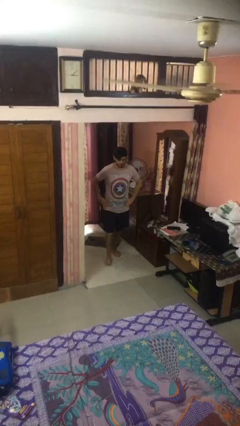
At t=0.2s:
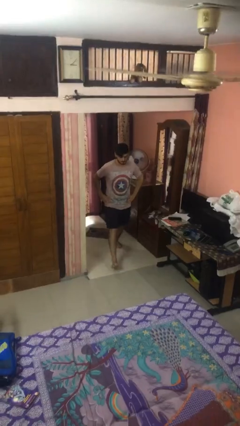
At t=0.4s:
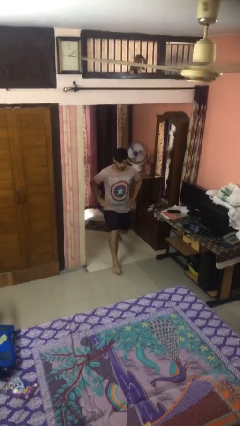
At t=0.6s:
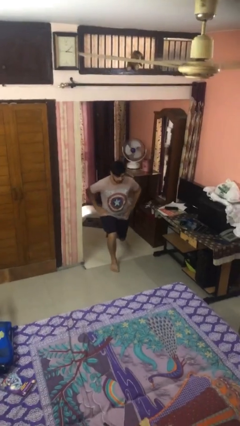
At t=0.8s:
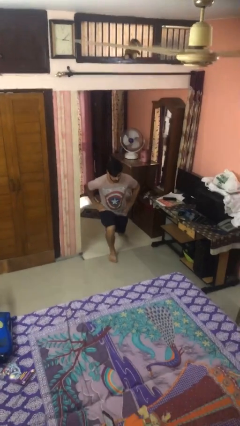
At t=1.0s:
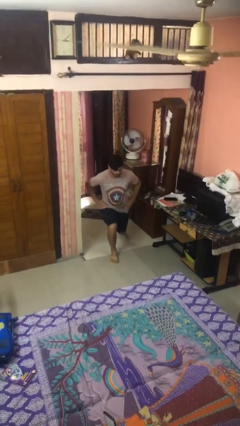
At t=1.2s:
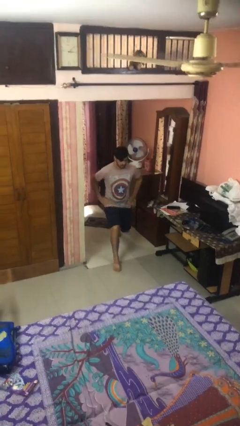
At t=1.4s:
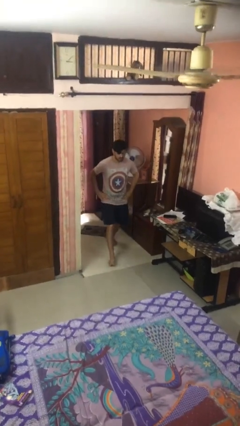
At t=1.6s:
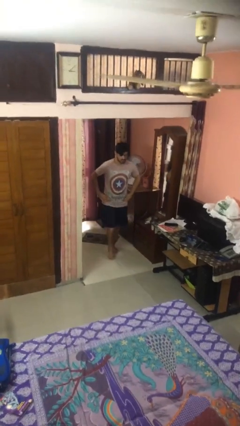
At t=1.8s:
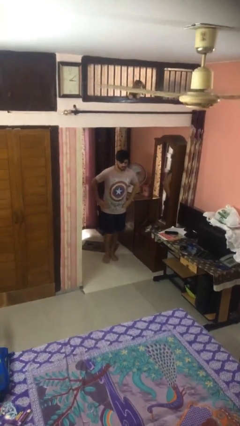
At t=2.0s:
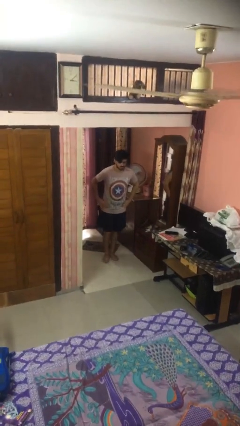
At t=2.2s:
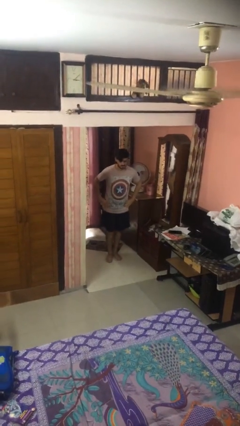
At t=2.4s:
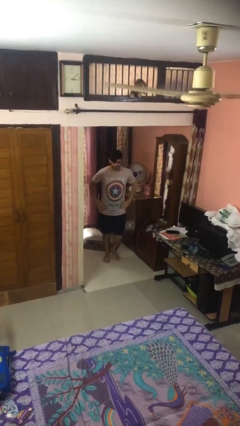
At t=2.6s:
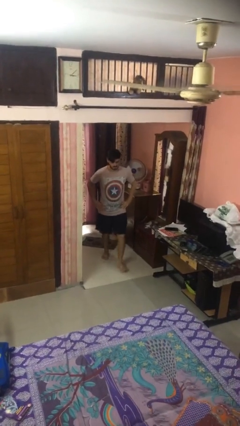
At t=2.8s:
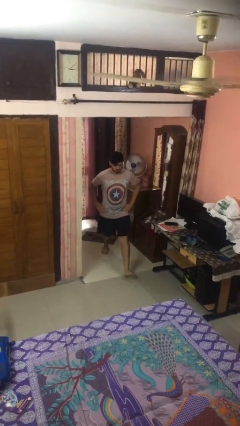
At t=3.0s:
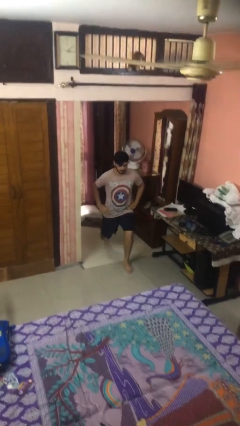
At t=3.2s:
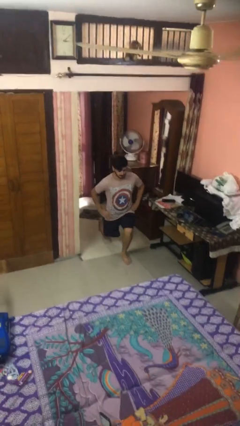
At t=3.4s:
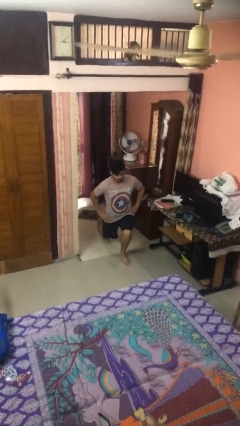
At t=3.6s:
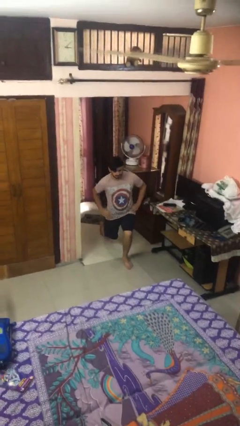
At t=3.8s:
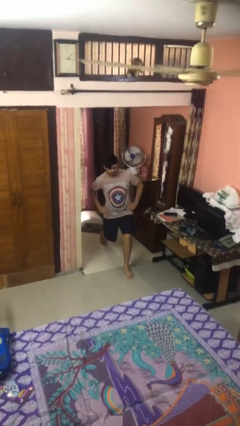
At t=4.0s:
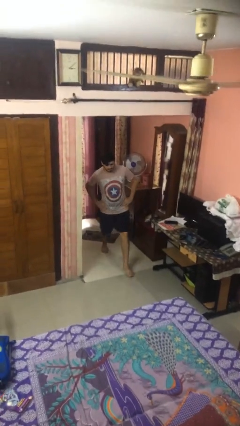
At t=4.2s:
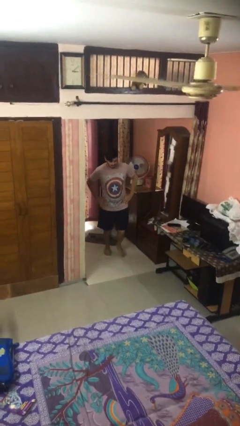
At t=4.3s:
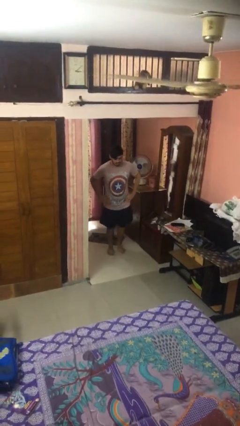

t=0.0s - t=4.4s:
person exercises with lunges

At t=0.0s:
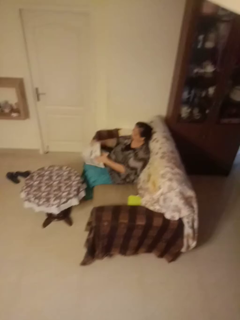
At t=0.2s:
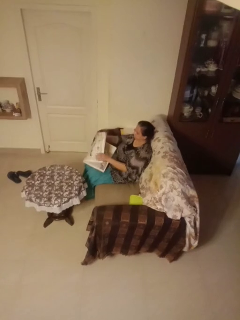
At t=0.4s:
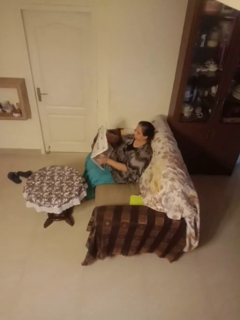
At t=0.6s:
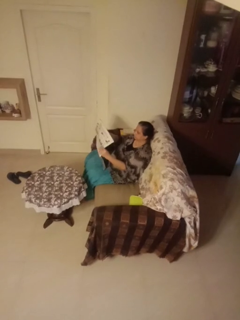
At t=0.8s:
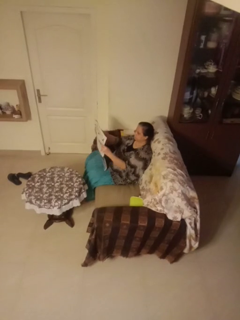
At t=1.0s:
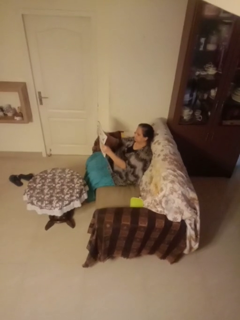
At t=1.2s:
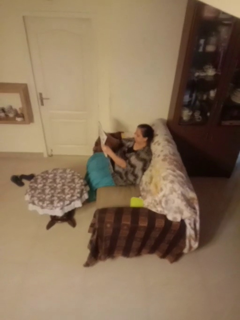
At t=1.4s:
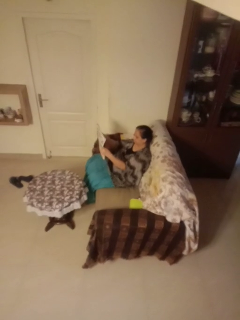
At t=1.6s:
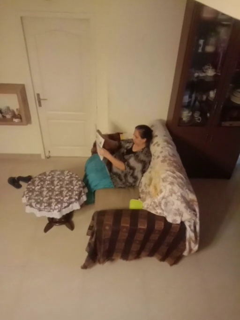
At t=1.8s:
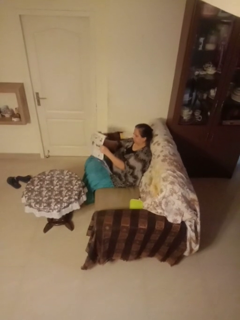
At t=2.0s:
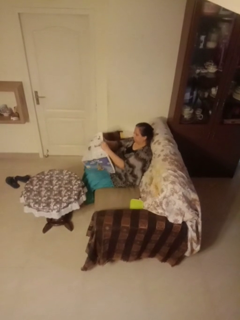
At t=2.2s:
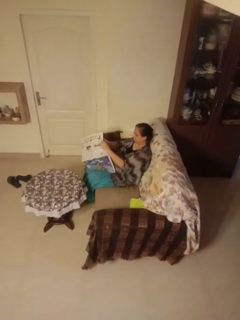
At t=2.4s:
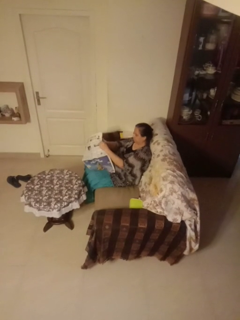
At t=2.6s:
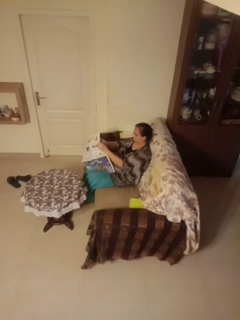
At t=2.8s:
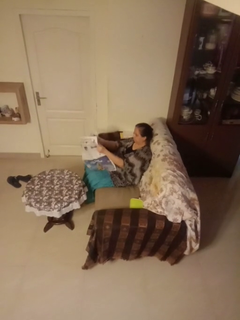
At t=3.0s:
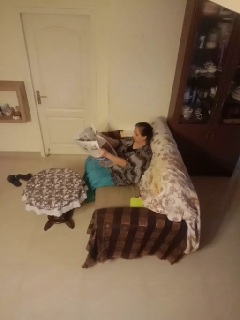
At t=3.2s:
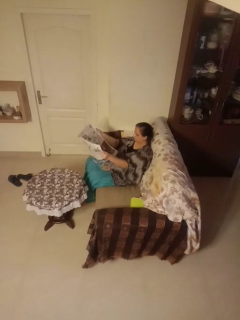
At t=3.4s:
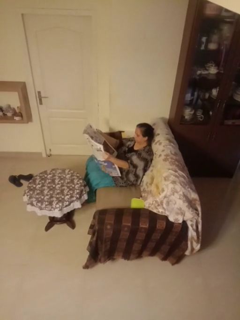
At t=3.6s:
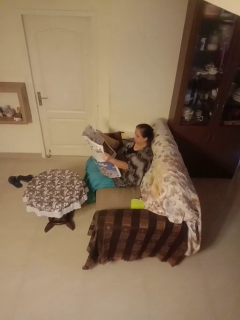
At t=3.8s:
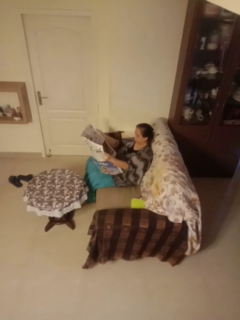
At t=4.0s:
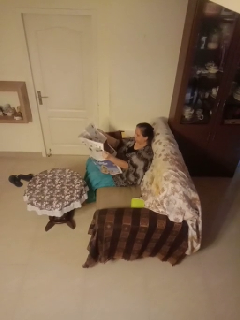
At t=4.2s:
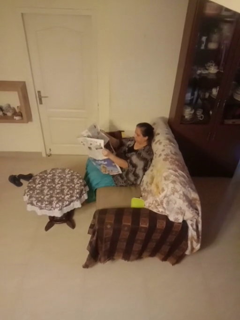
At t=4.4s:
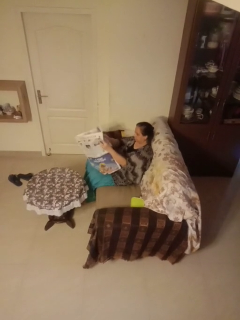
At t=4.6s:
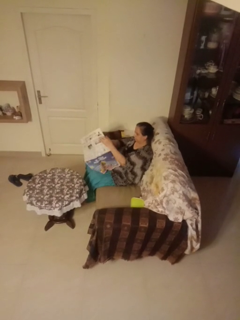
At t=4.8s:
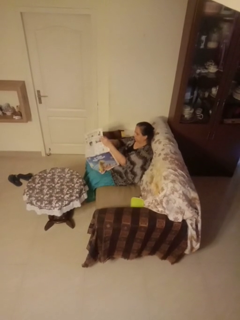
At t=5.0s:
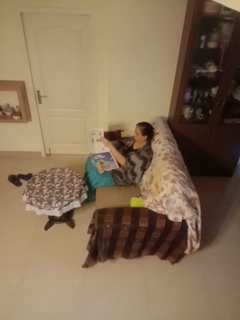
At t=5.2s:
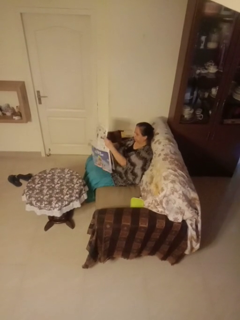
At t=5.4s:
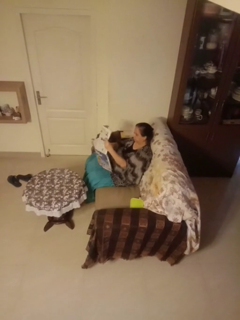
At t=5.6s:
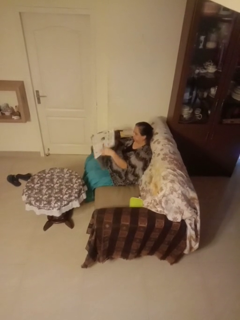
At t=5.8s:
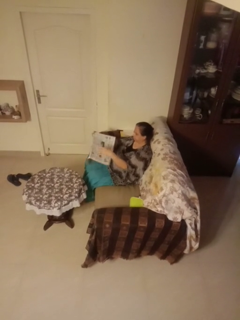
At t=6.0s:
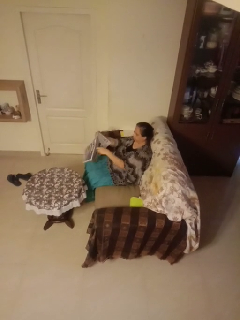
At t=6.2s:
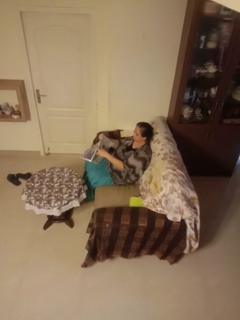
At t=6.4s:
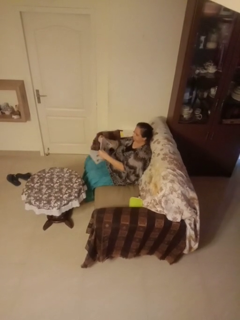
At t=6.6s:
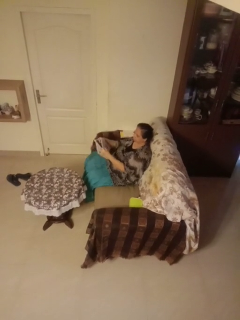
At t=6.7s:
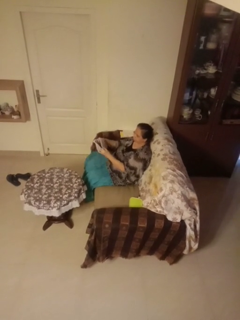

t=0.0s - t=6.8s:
person reads newspaper

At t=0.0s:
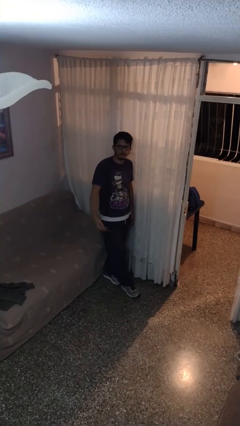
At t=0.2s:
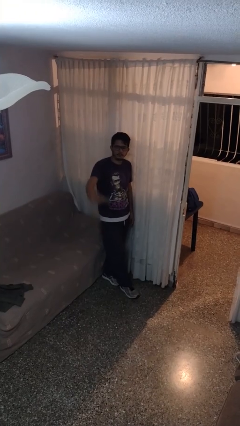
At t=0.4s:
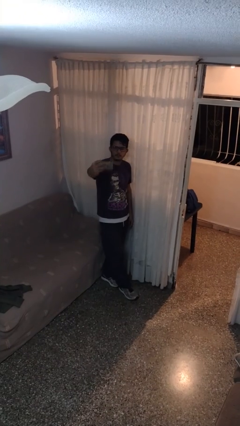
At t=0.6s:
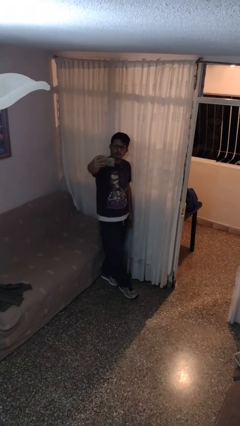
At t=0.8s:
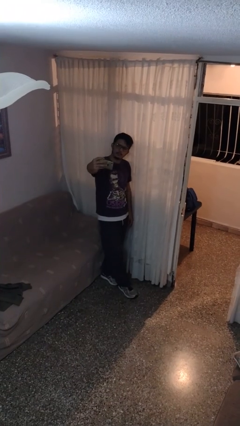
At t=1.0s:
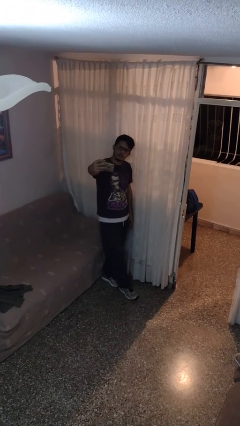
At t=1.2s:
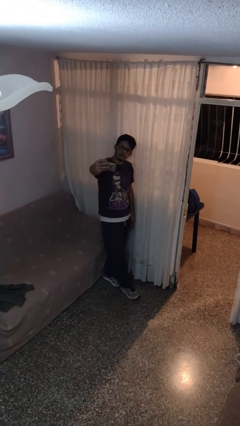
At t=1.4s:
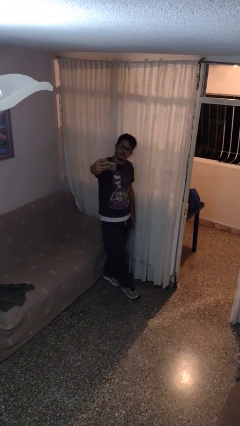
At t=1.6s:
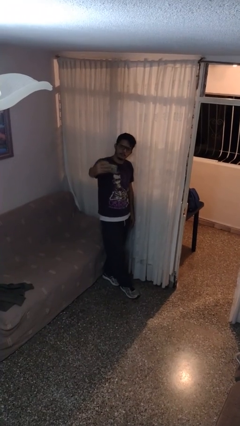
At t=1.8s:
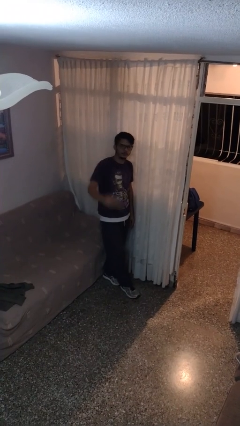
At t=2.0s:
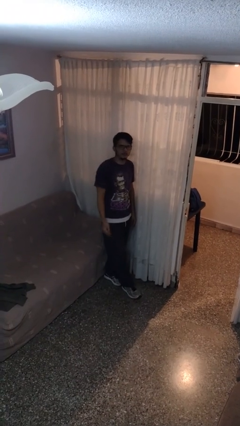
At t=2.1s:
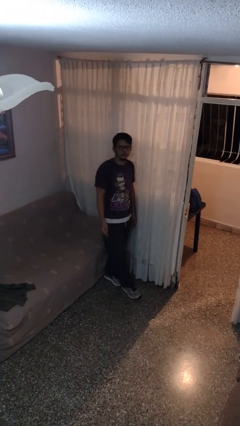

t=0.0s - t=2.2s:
person takes selfie

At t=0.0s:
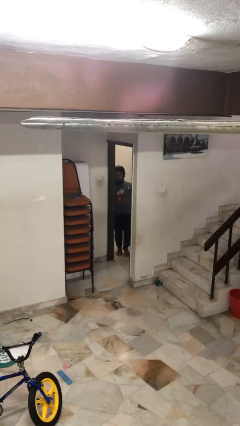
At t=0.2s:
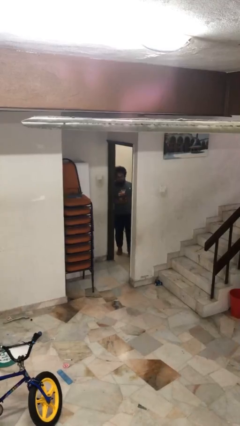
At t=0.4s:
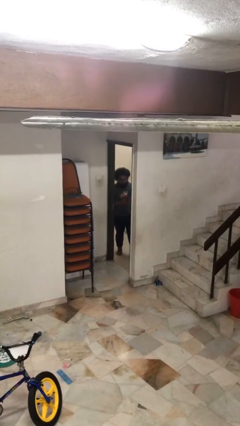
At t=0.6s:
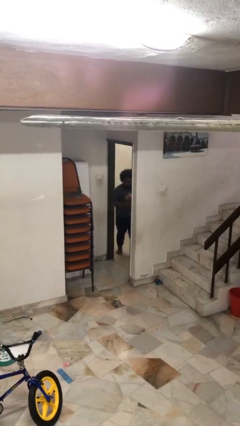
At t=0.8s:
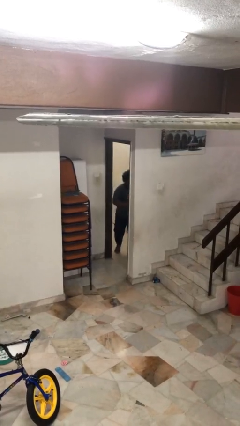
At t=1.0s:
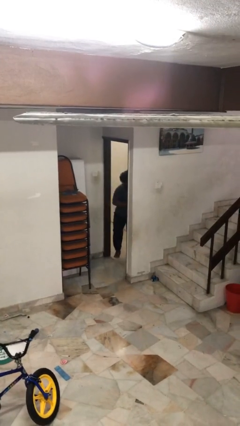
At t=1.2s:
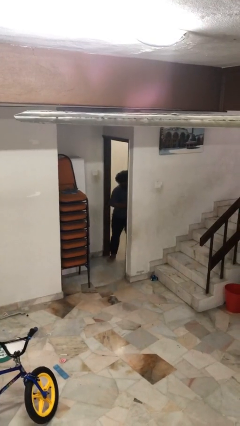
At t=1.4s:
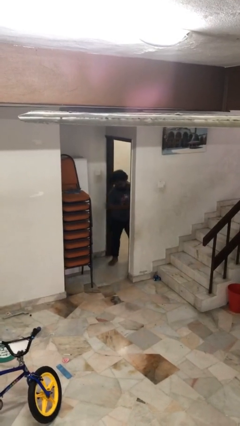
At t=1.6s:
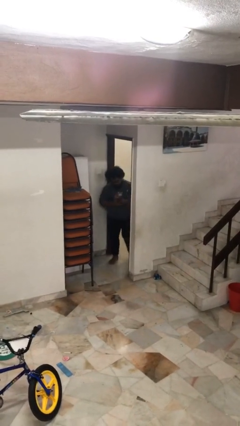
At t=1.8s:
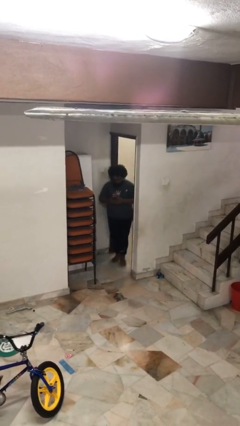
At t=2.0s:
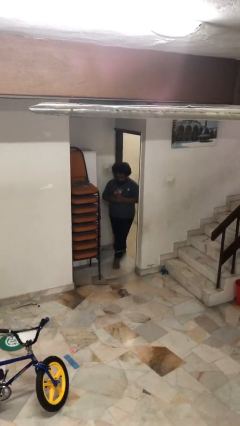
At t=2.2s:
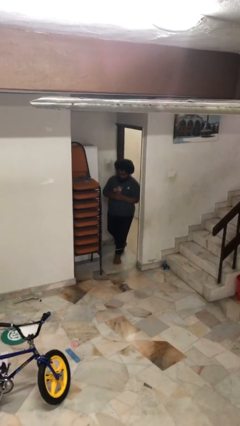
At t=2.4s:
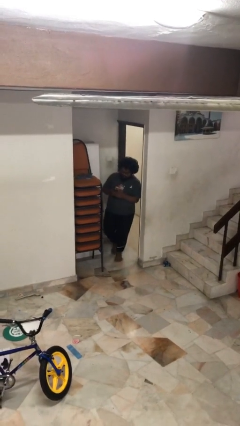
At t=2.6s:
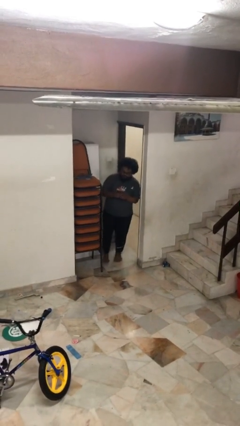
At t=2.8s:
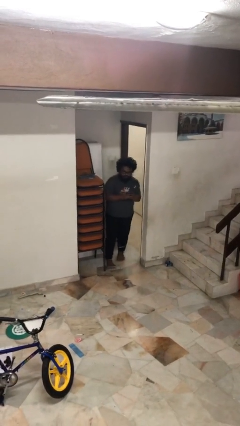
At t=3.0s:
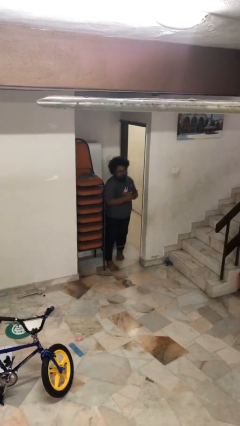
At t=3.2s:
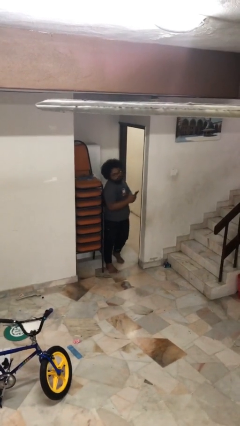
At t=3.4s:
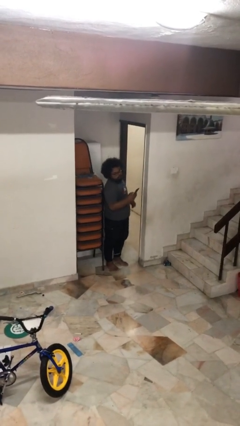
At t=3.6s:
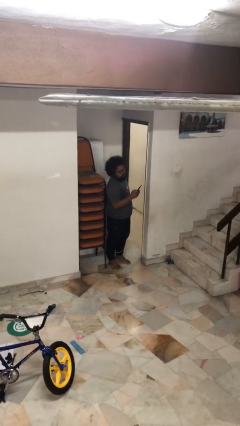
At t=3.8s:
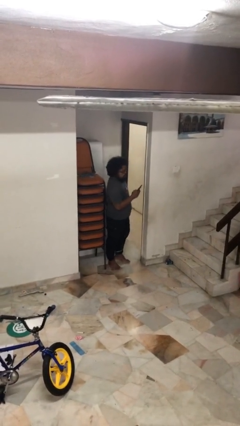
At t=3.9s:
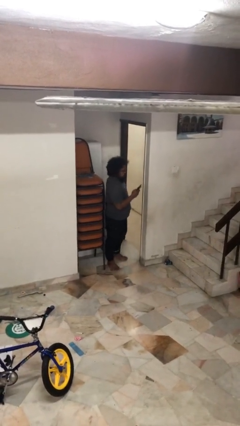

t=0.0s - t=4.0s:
person enters scene through structure

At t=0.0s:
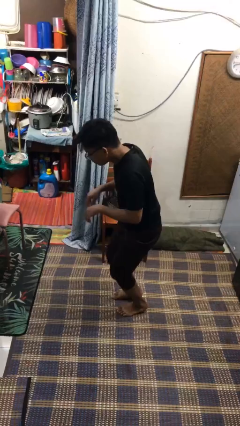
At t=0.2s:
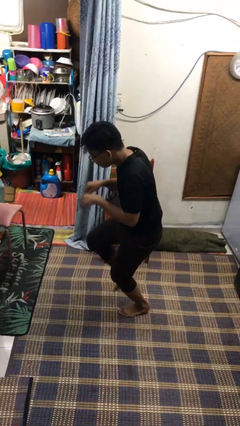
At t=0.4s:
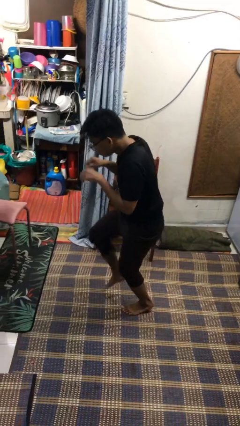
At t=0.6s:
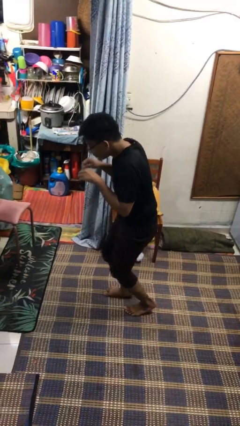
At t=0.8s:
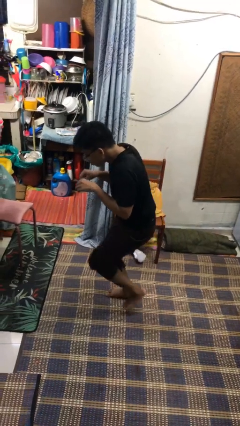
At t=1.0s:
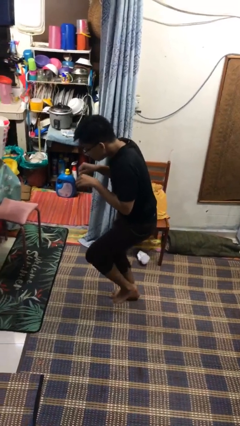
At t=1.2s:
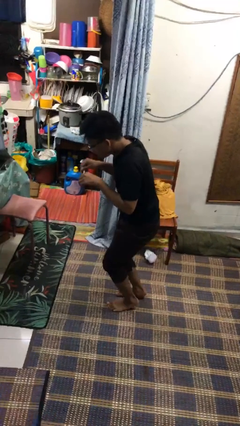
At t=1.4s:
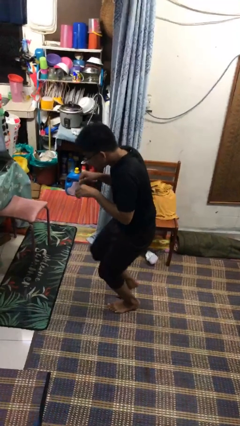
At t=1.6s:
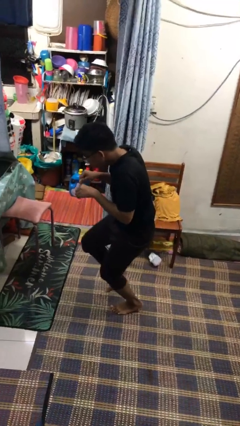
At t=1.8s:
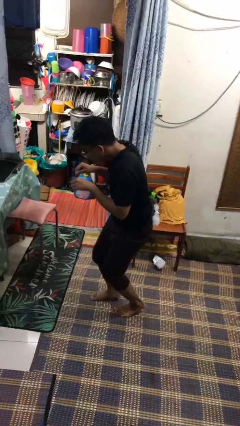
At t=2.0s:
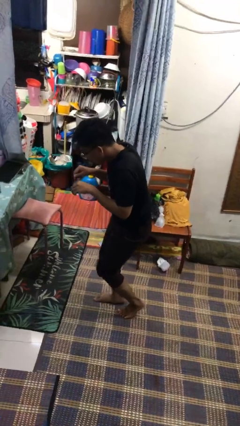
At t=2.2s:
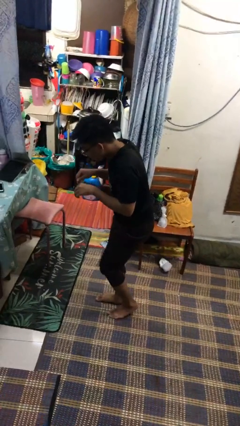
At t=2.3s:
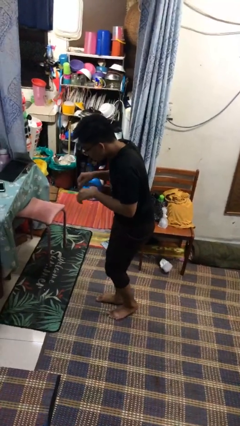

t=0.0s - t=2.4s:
person walks tiptoe
